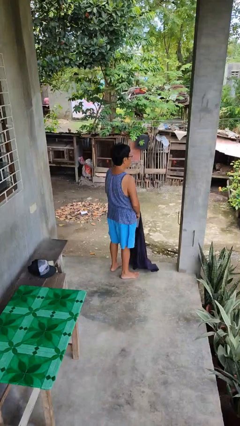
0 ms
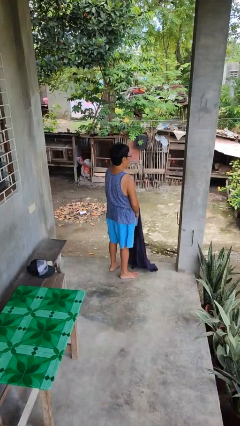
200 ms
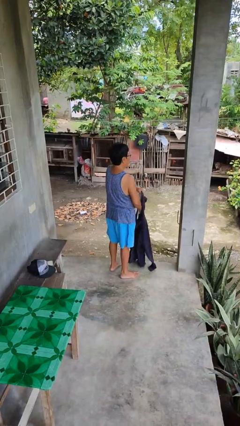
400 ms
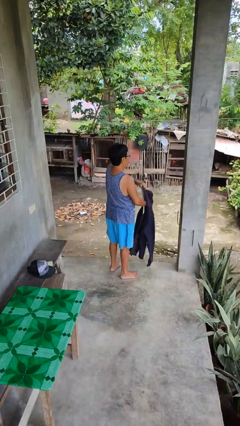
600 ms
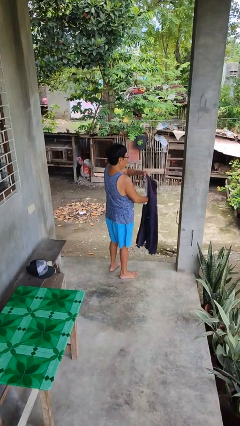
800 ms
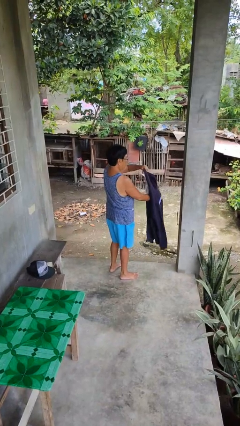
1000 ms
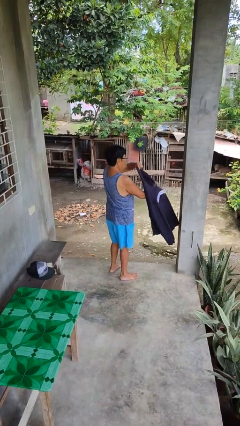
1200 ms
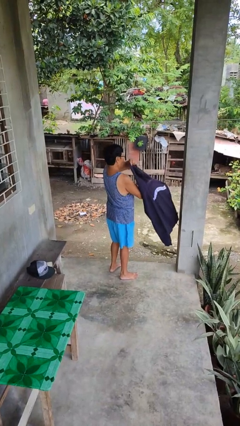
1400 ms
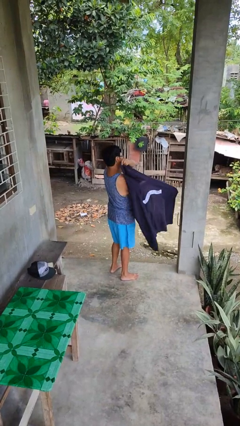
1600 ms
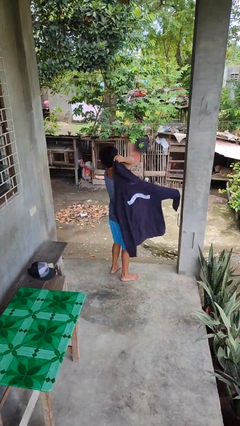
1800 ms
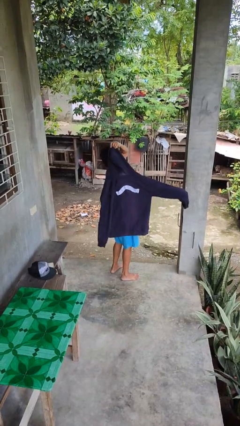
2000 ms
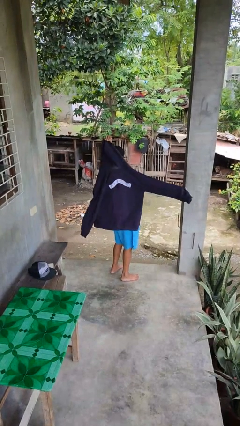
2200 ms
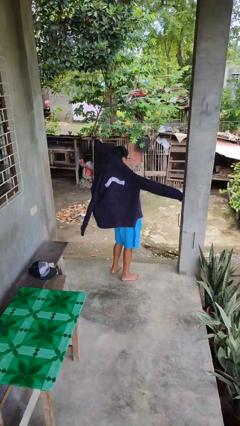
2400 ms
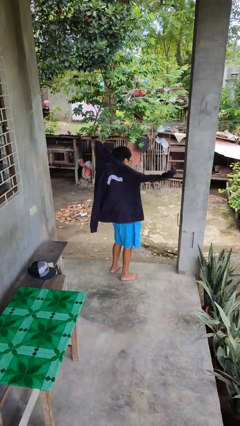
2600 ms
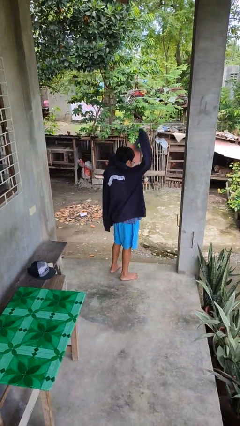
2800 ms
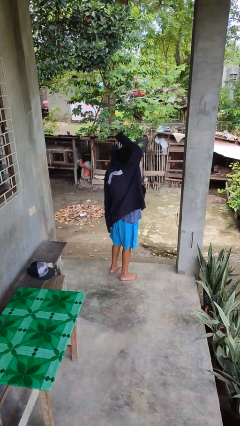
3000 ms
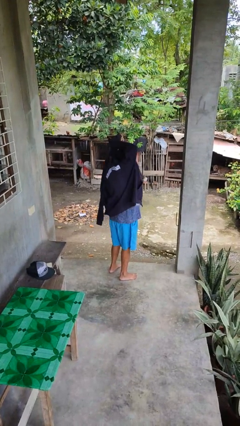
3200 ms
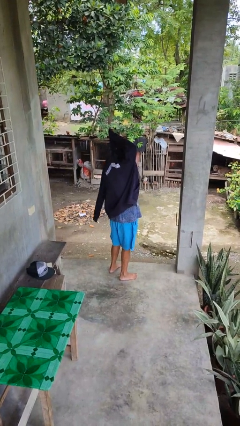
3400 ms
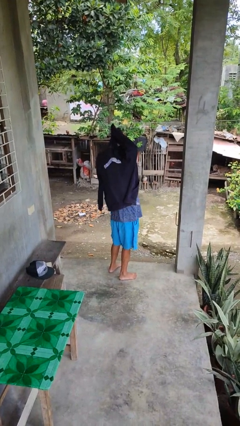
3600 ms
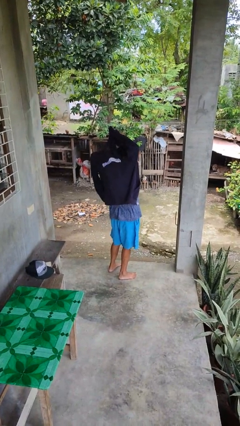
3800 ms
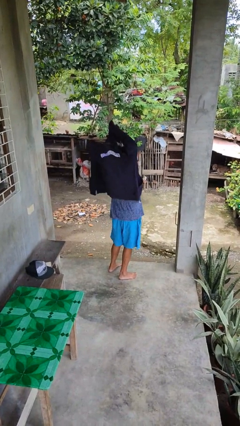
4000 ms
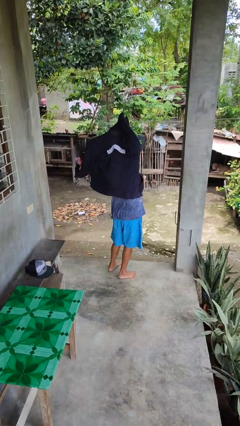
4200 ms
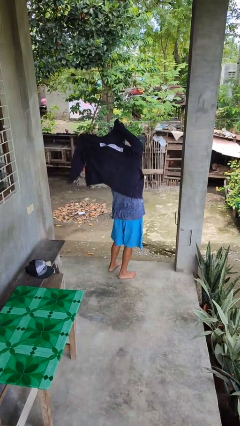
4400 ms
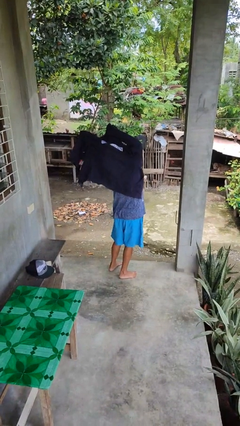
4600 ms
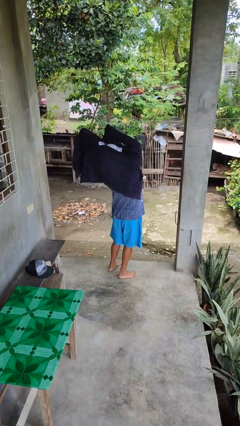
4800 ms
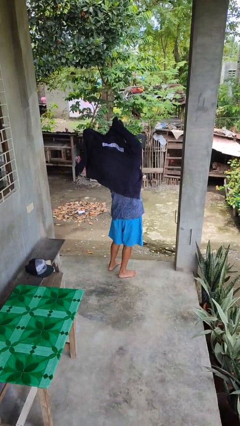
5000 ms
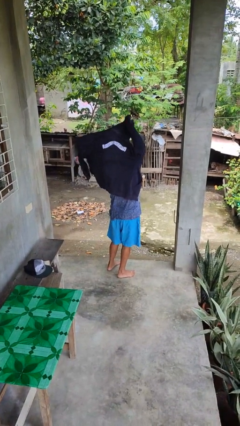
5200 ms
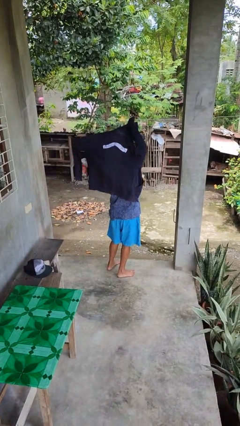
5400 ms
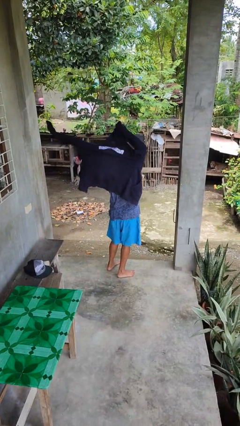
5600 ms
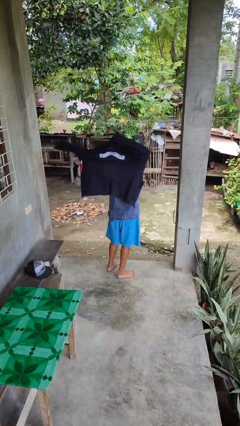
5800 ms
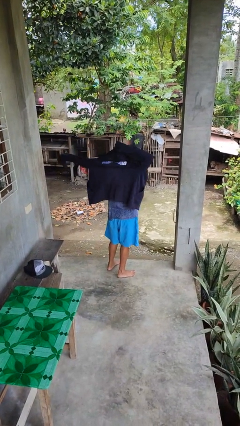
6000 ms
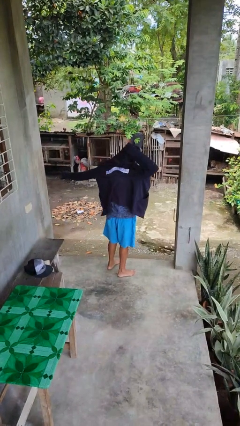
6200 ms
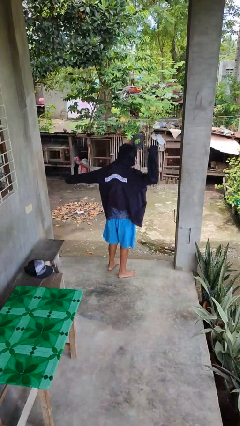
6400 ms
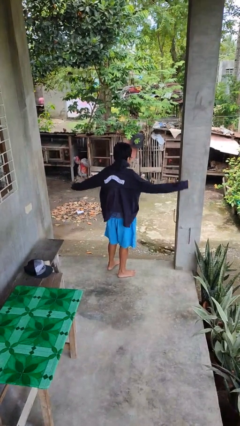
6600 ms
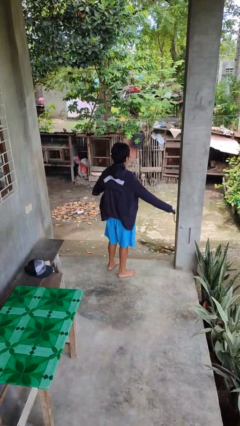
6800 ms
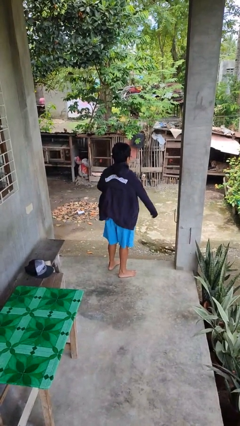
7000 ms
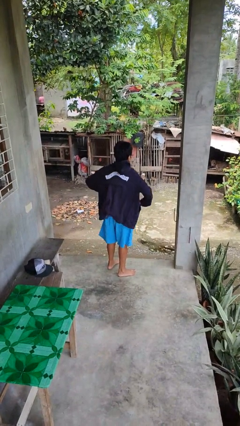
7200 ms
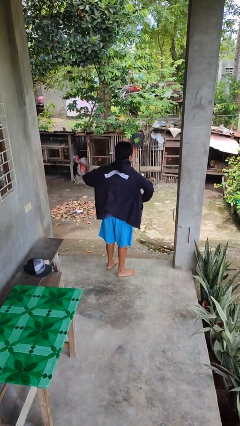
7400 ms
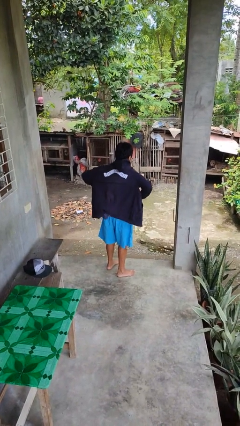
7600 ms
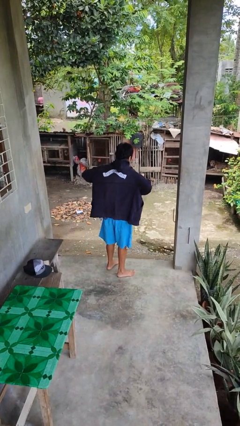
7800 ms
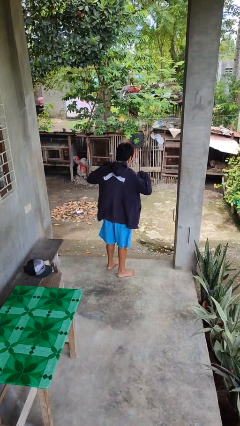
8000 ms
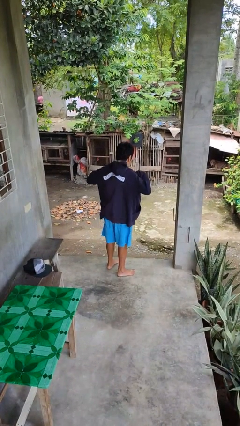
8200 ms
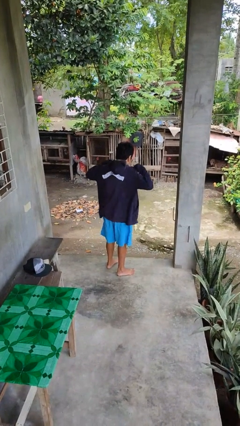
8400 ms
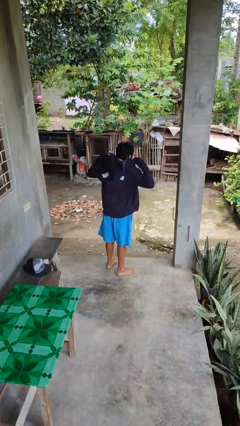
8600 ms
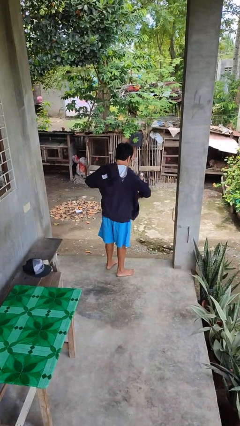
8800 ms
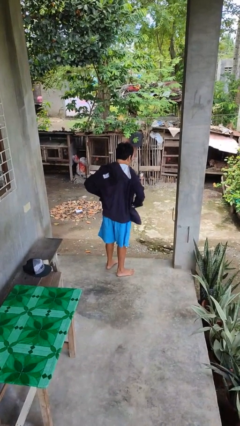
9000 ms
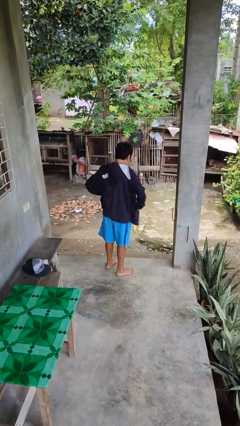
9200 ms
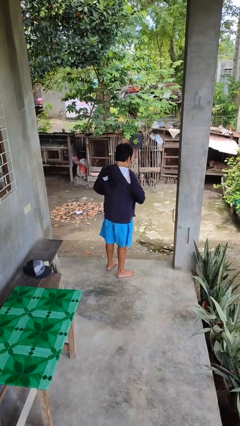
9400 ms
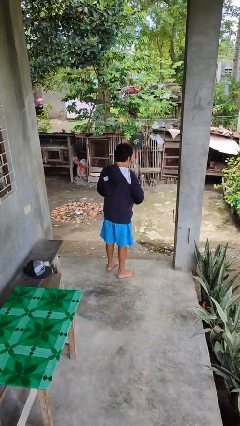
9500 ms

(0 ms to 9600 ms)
person puts on jacket

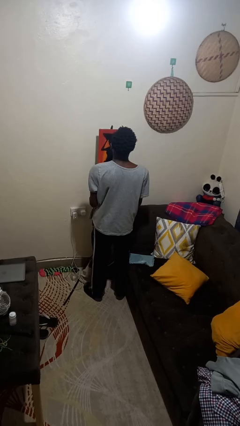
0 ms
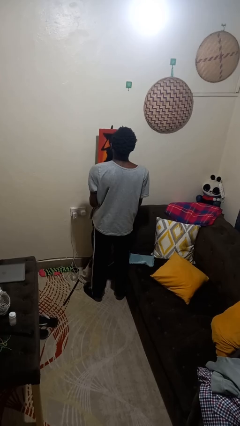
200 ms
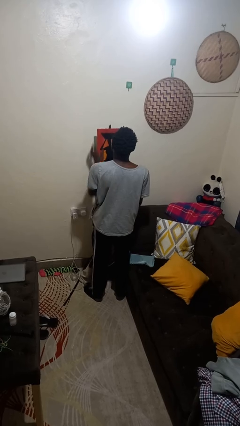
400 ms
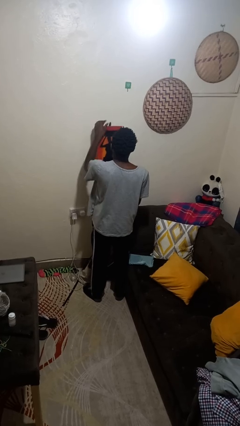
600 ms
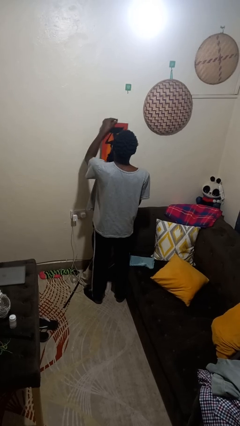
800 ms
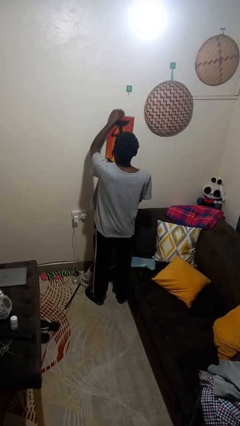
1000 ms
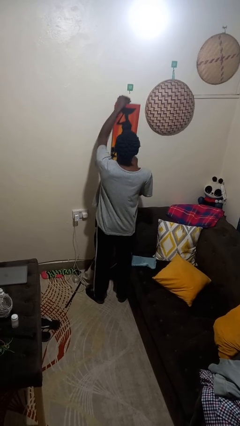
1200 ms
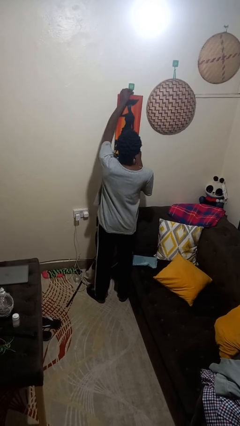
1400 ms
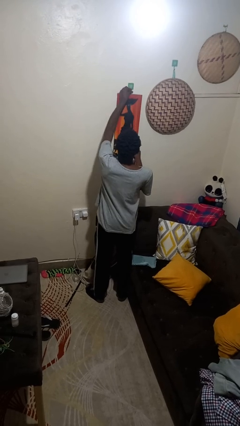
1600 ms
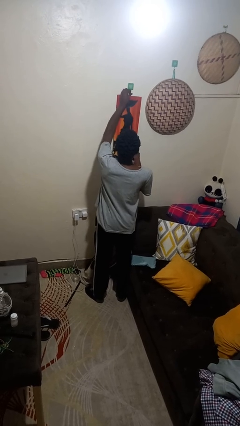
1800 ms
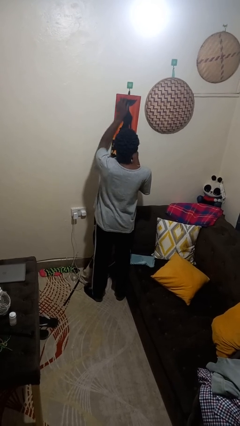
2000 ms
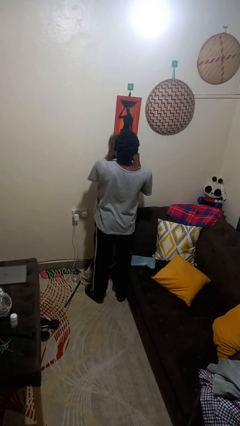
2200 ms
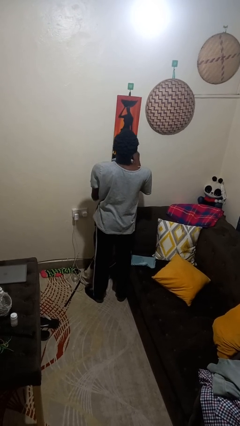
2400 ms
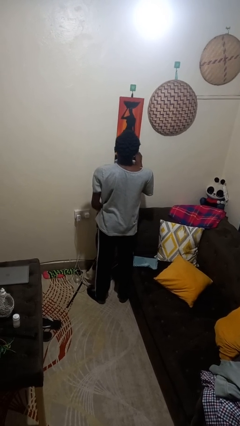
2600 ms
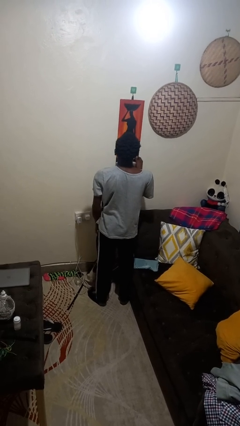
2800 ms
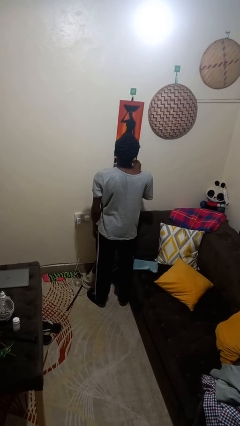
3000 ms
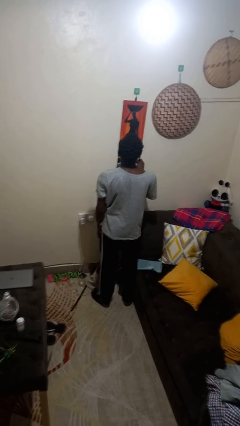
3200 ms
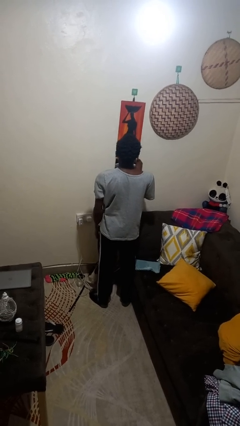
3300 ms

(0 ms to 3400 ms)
person puts up picture frame

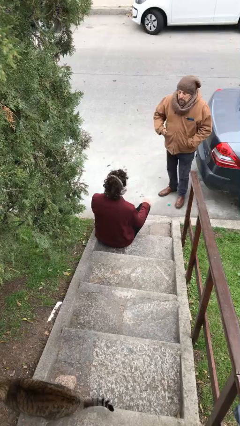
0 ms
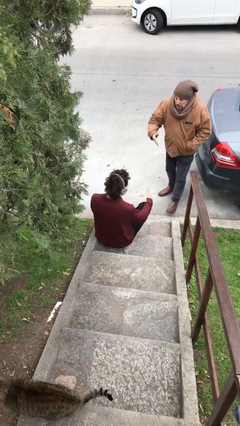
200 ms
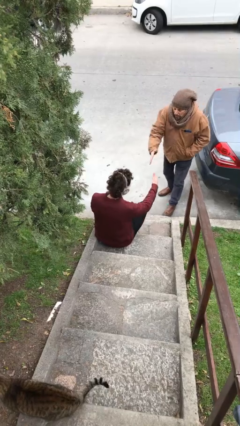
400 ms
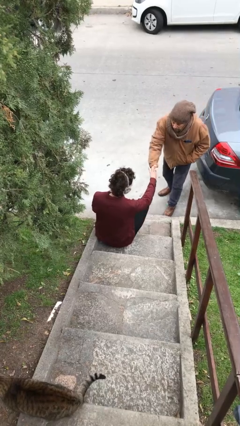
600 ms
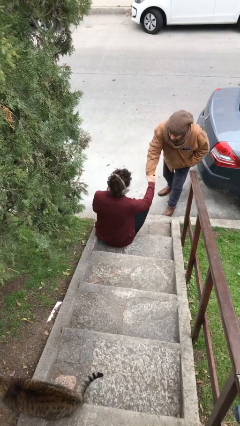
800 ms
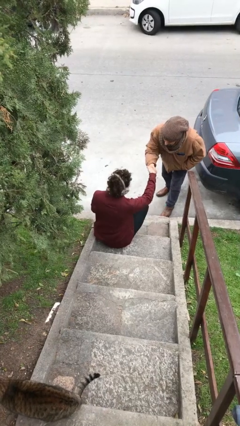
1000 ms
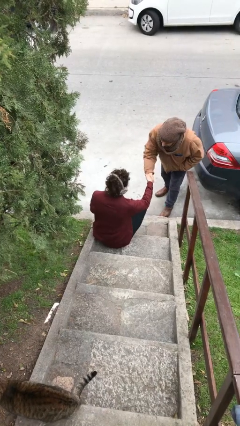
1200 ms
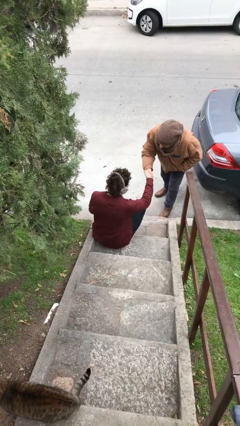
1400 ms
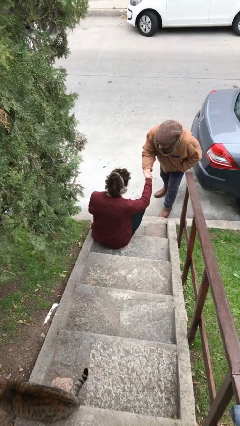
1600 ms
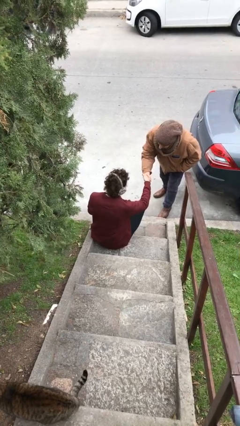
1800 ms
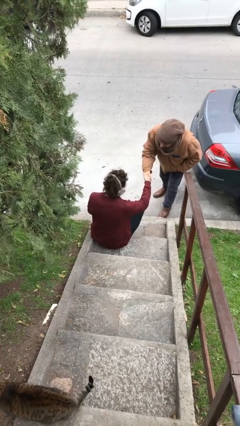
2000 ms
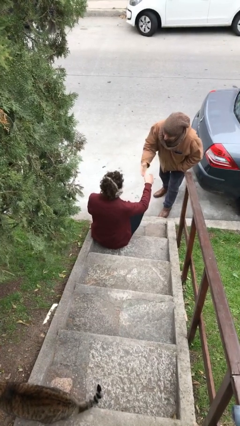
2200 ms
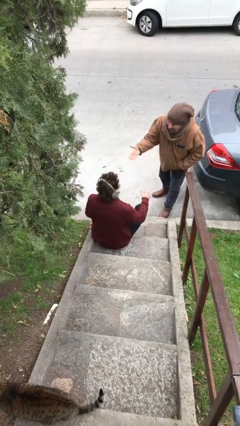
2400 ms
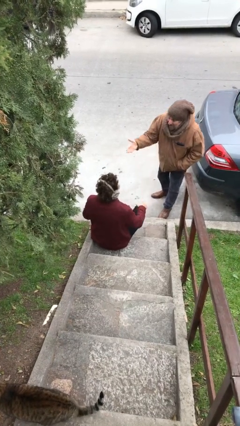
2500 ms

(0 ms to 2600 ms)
person shakes hand

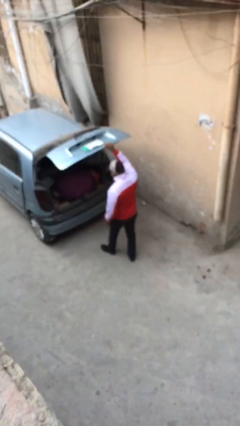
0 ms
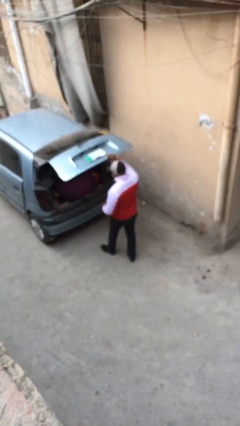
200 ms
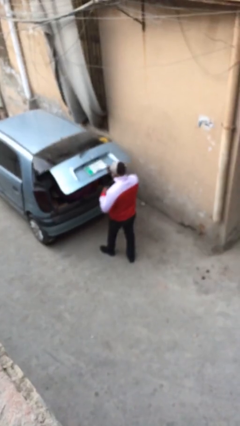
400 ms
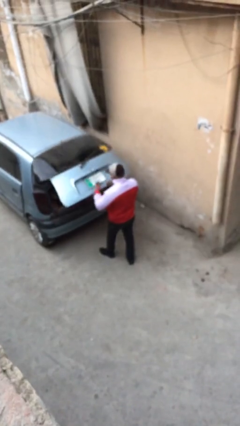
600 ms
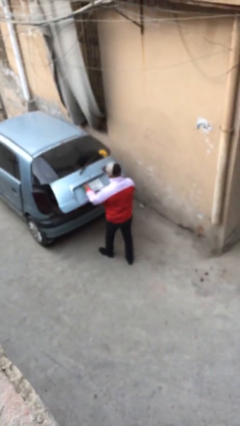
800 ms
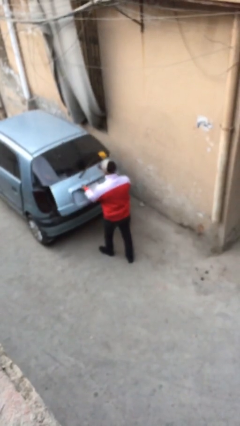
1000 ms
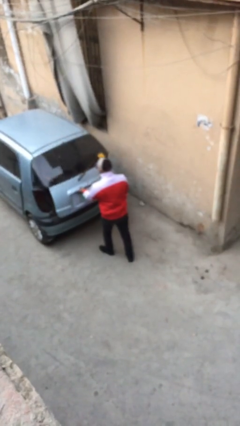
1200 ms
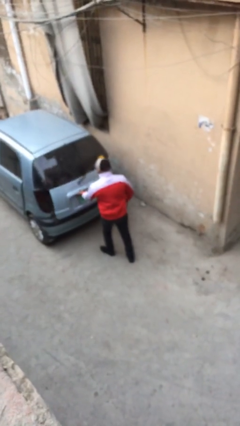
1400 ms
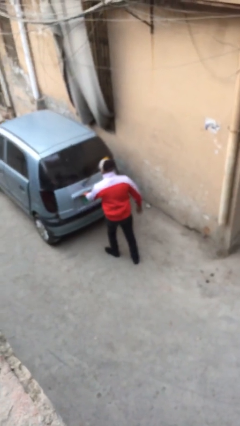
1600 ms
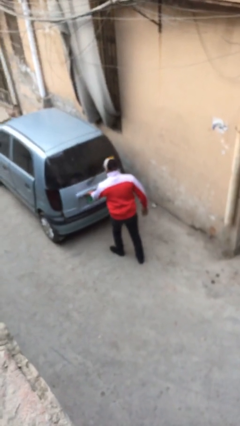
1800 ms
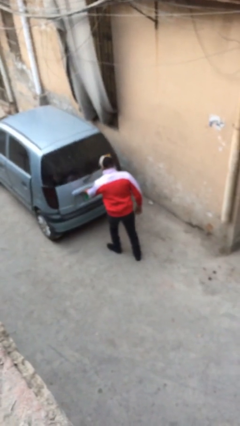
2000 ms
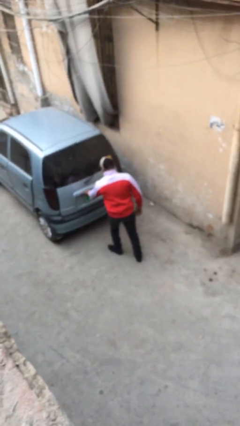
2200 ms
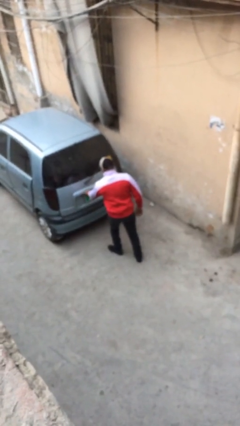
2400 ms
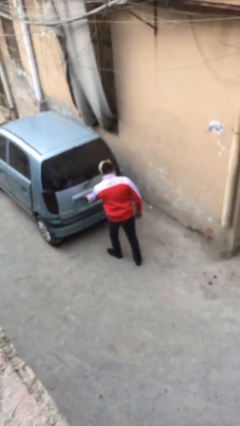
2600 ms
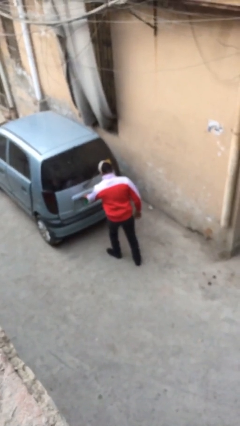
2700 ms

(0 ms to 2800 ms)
person closes car trunk
